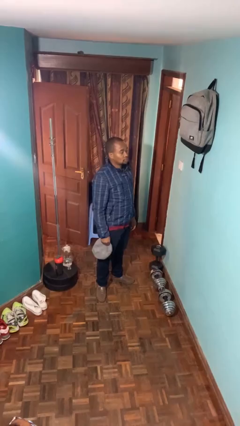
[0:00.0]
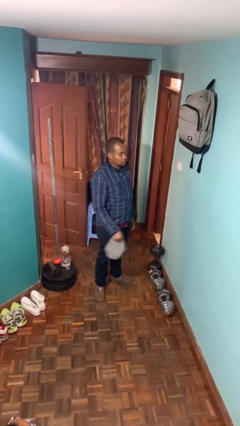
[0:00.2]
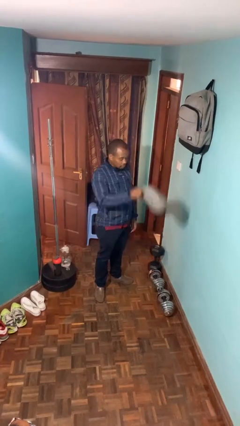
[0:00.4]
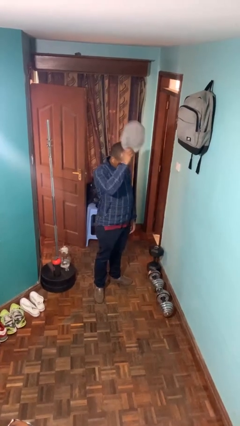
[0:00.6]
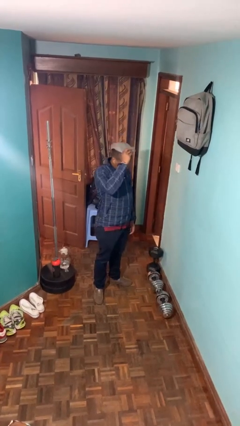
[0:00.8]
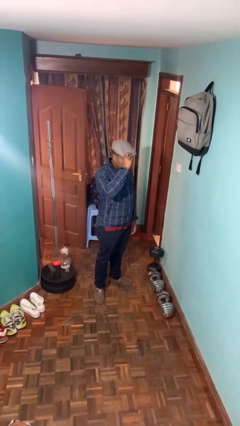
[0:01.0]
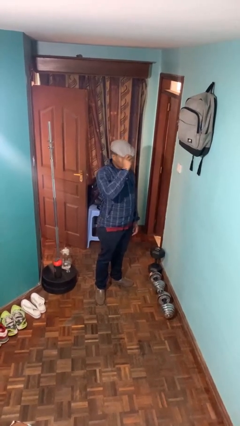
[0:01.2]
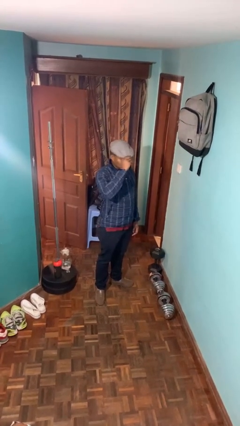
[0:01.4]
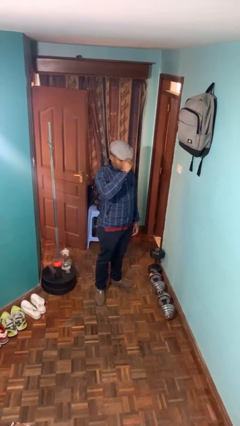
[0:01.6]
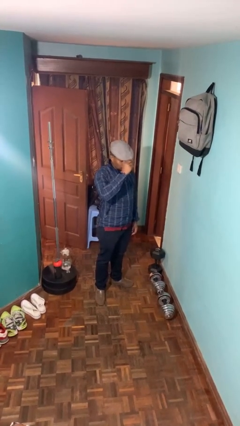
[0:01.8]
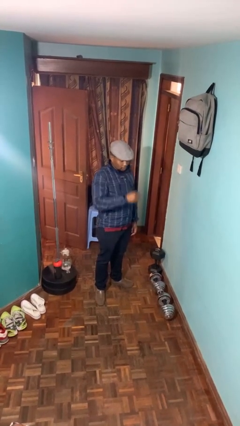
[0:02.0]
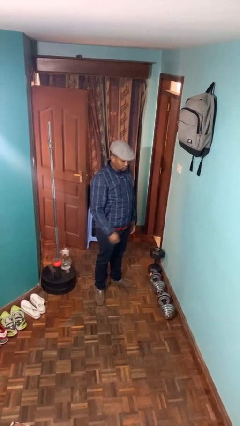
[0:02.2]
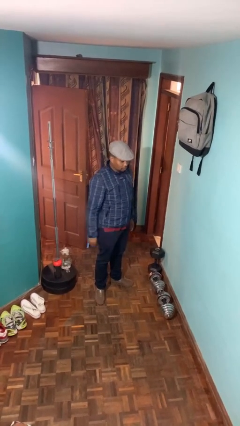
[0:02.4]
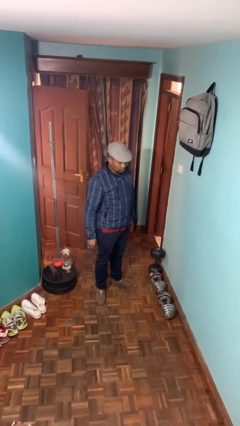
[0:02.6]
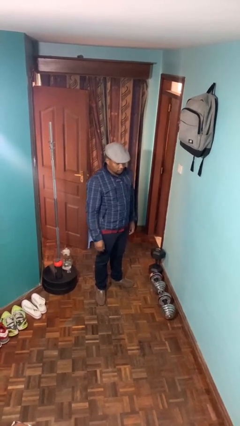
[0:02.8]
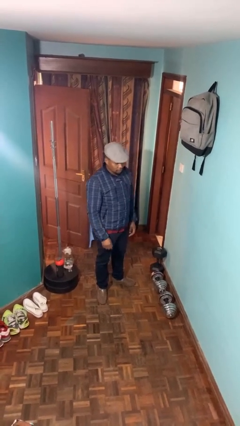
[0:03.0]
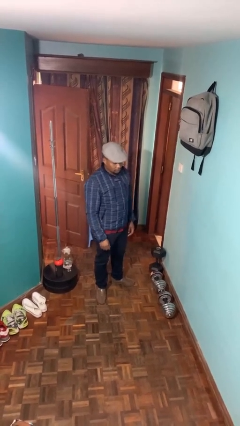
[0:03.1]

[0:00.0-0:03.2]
person puts on hat

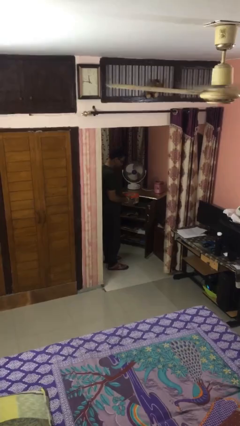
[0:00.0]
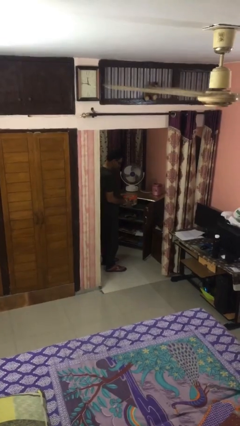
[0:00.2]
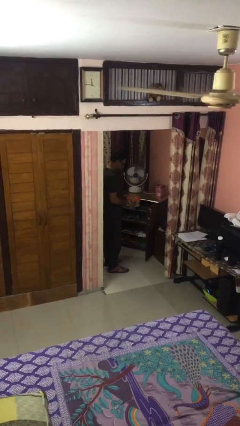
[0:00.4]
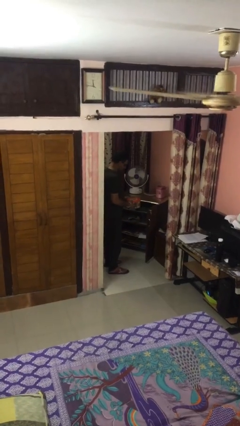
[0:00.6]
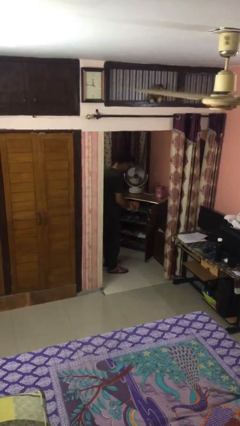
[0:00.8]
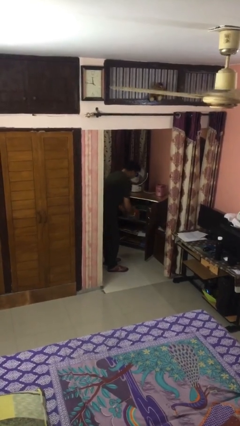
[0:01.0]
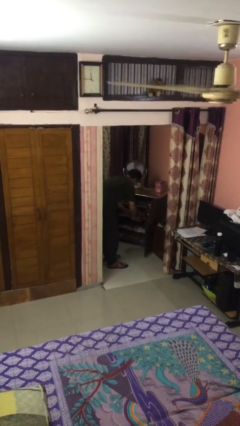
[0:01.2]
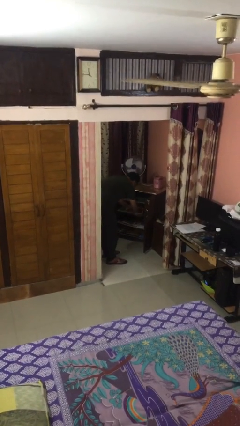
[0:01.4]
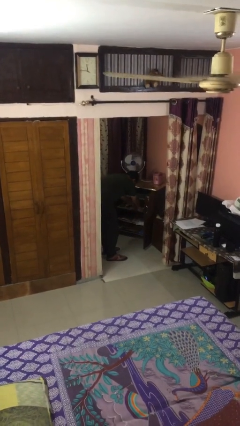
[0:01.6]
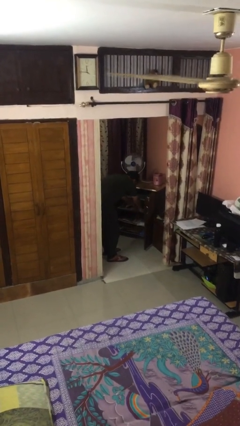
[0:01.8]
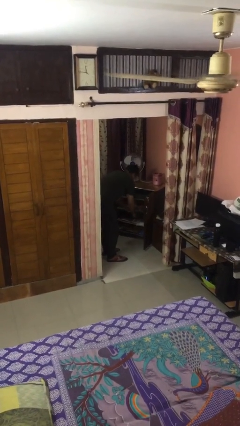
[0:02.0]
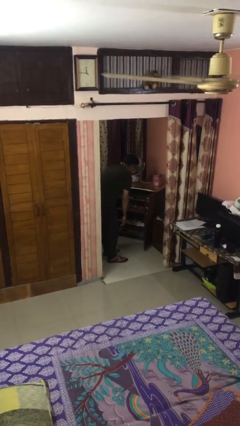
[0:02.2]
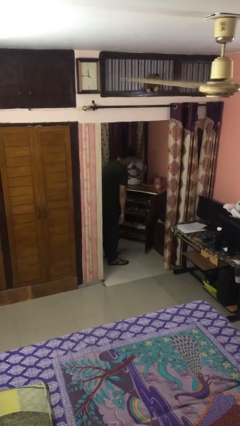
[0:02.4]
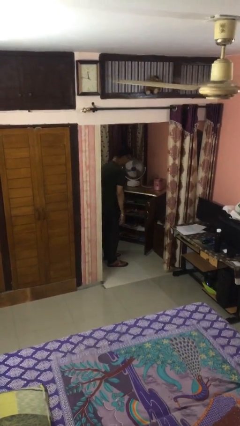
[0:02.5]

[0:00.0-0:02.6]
person puts down object into cabinet

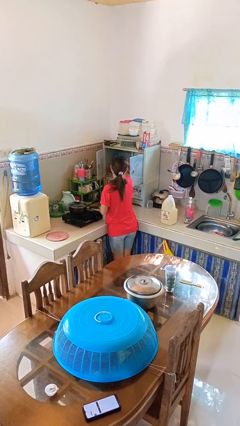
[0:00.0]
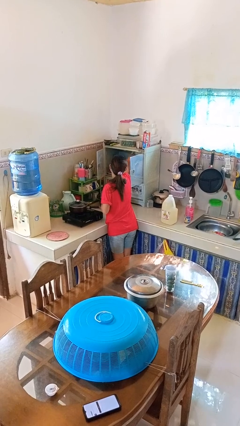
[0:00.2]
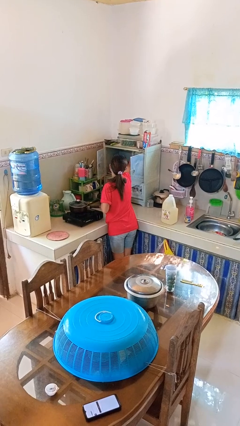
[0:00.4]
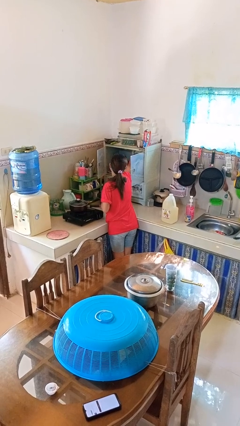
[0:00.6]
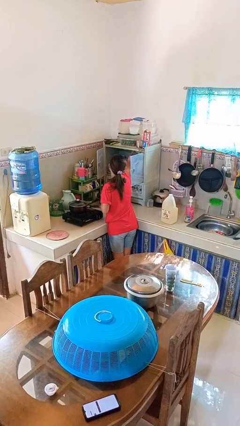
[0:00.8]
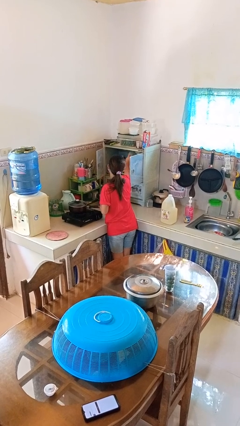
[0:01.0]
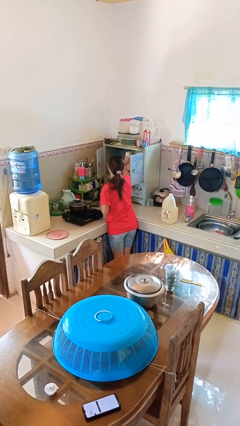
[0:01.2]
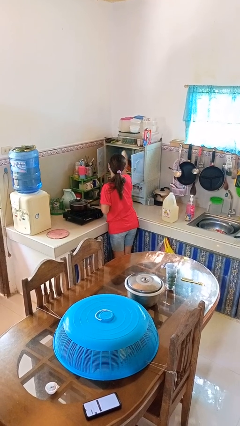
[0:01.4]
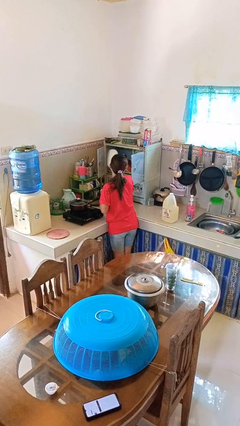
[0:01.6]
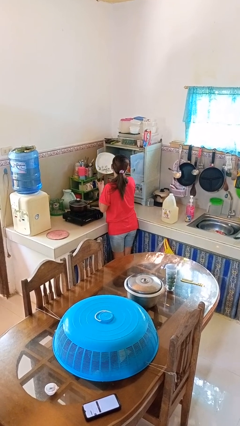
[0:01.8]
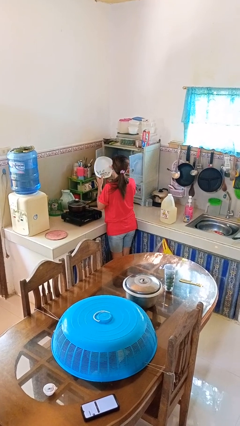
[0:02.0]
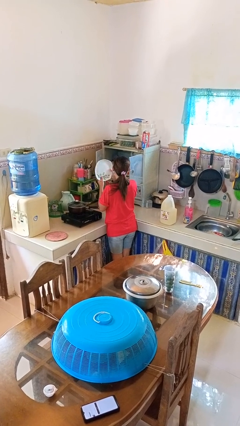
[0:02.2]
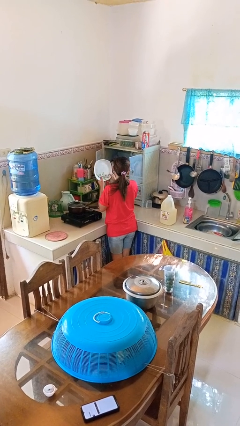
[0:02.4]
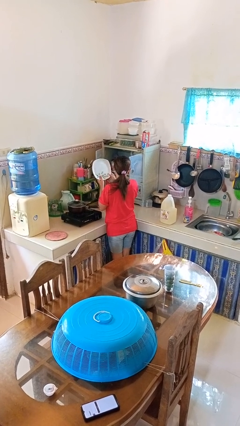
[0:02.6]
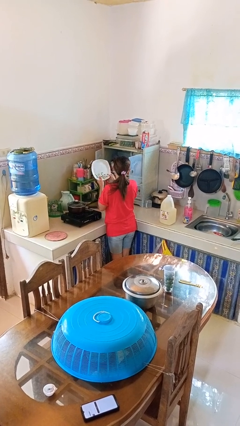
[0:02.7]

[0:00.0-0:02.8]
person takes object from cabinet

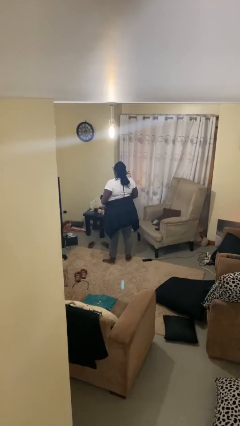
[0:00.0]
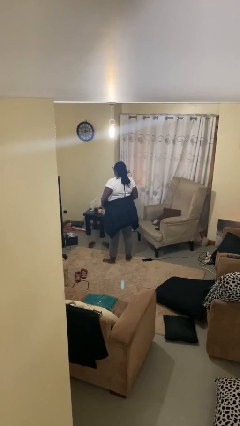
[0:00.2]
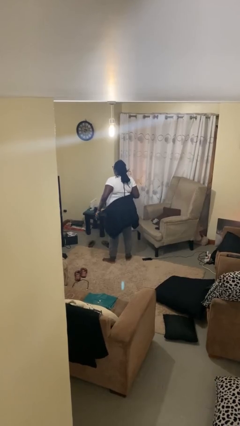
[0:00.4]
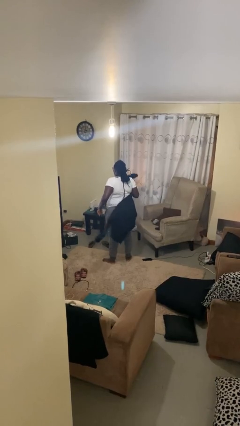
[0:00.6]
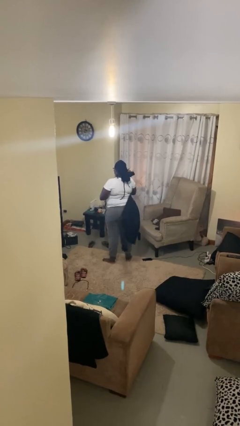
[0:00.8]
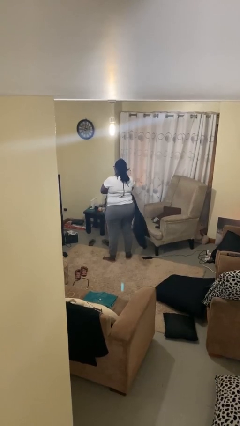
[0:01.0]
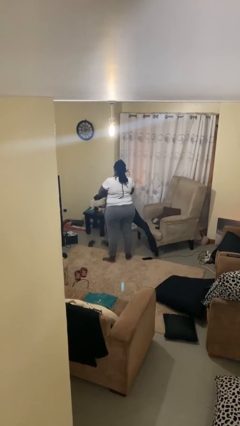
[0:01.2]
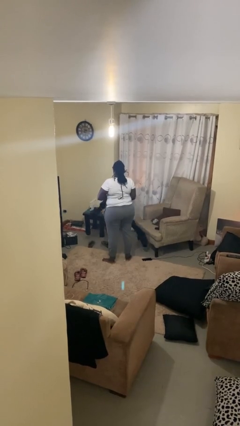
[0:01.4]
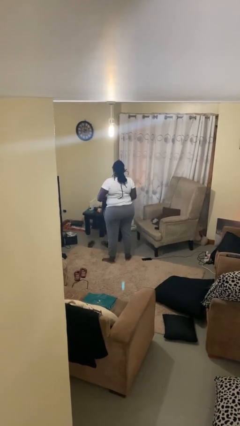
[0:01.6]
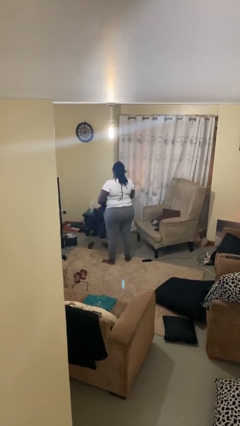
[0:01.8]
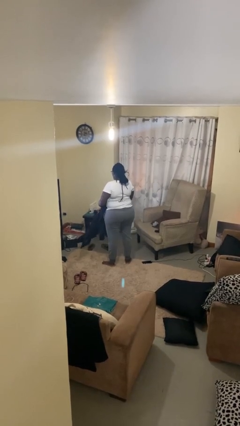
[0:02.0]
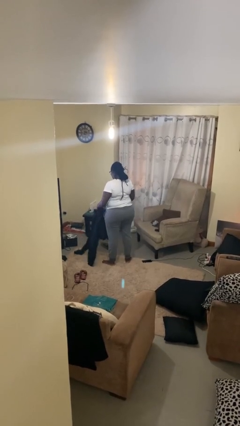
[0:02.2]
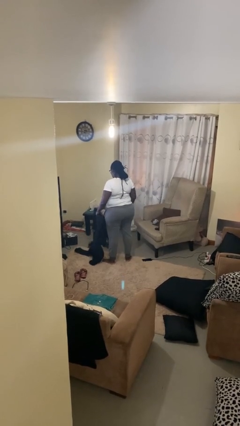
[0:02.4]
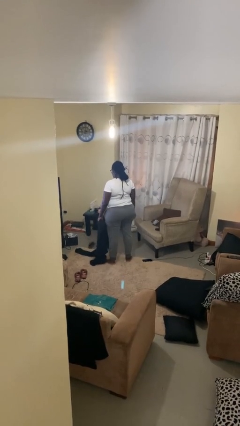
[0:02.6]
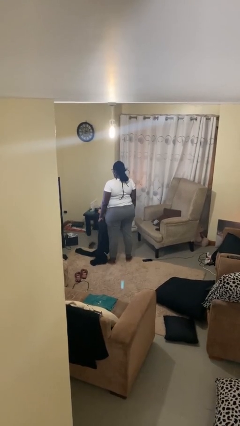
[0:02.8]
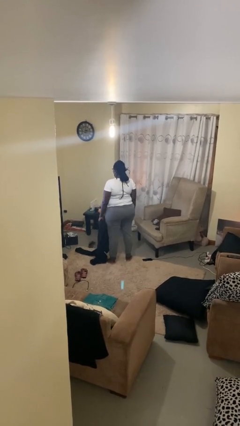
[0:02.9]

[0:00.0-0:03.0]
person unties jacket around waist

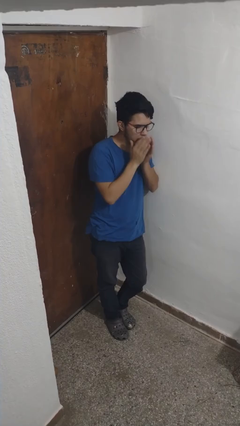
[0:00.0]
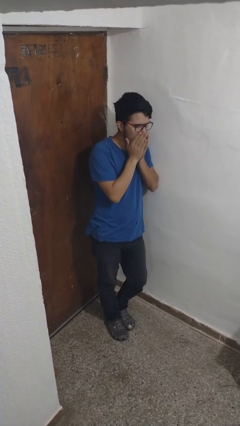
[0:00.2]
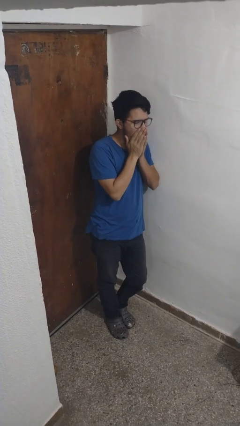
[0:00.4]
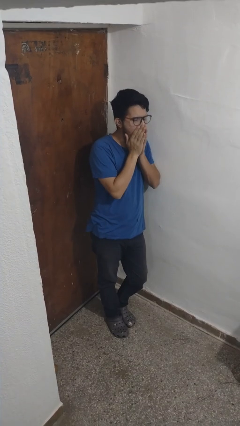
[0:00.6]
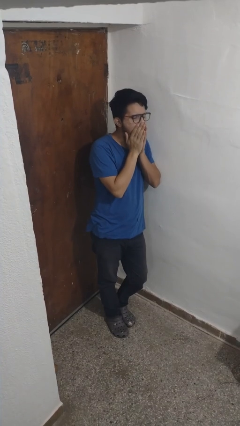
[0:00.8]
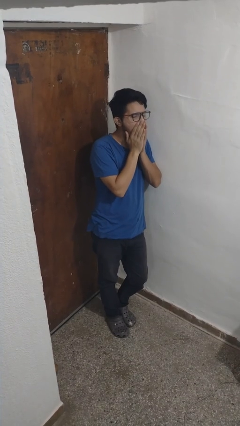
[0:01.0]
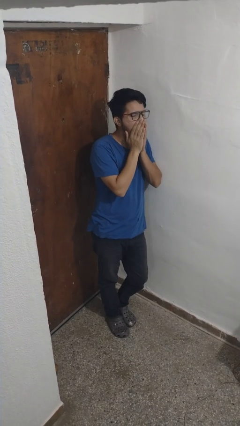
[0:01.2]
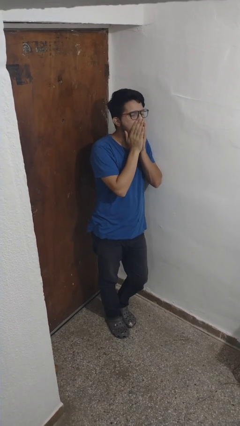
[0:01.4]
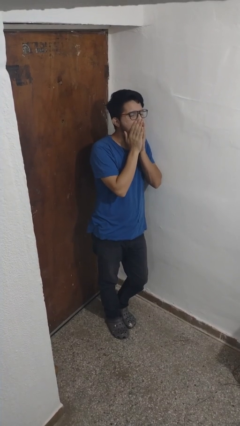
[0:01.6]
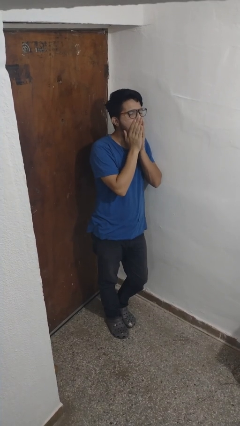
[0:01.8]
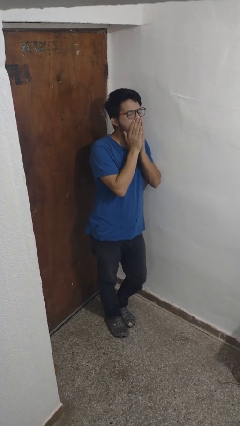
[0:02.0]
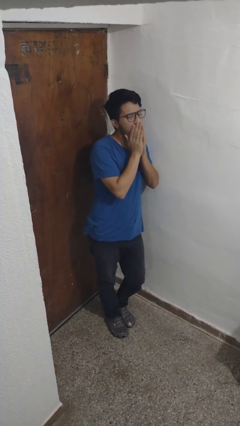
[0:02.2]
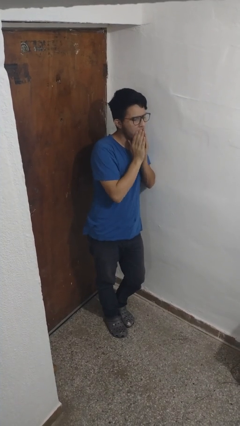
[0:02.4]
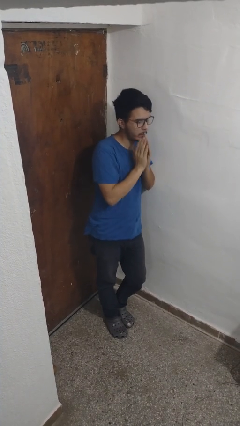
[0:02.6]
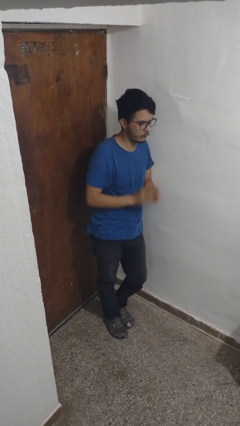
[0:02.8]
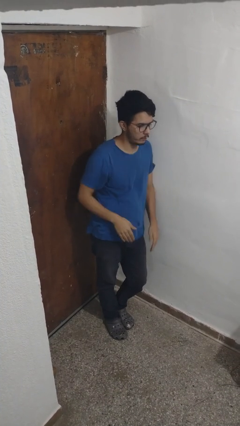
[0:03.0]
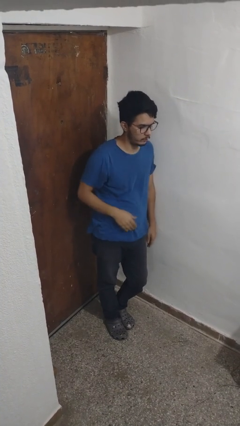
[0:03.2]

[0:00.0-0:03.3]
person yawns

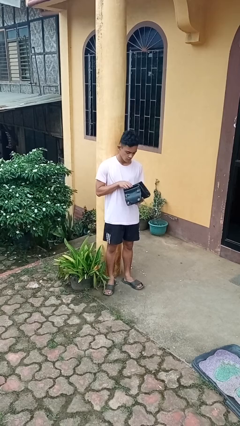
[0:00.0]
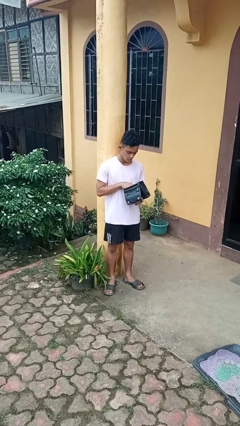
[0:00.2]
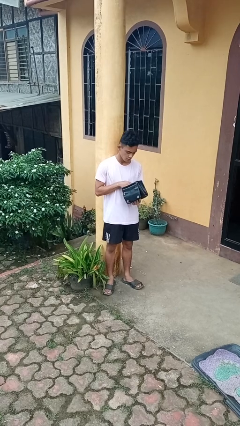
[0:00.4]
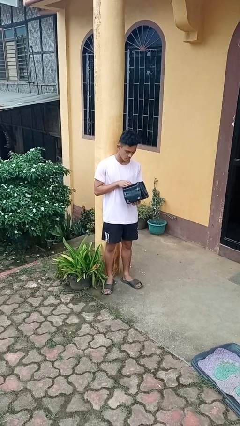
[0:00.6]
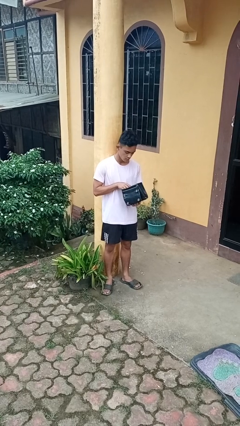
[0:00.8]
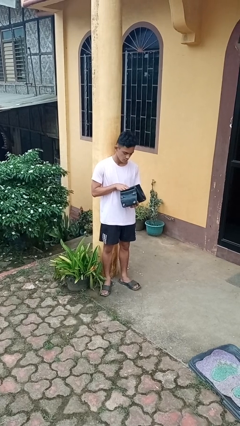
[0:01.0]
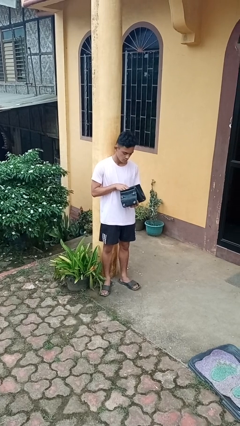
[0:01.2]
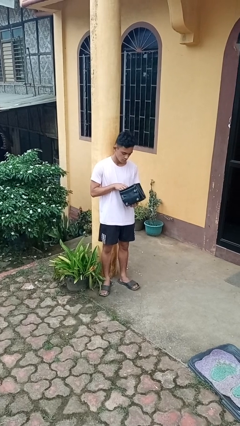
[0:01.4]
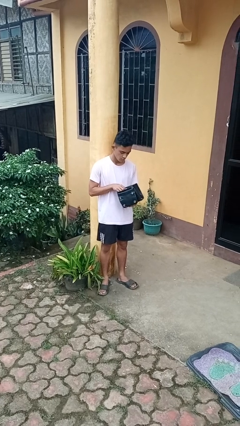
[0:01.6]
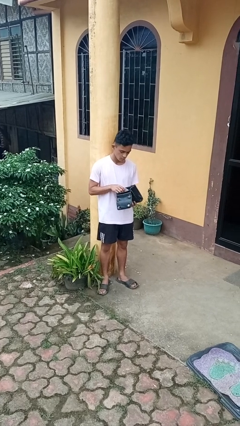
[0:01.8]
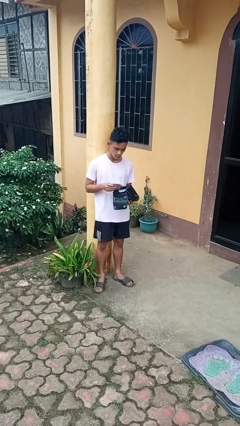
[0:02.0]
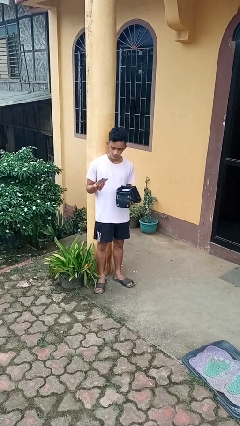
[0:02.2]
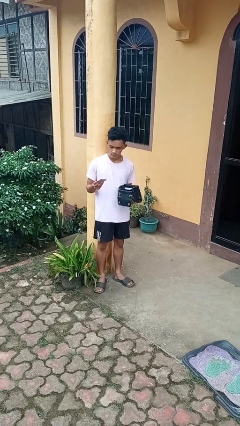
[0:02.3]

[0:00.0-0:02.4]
person searches in purse
